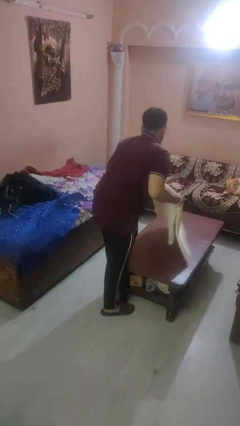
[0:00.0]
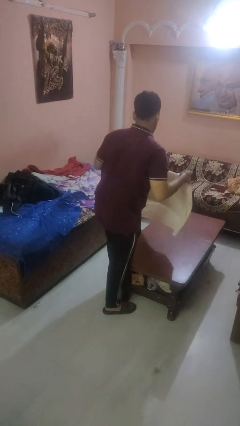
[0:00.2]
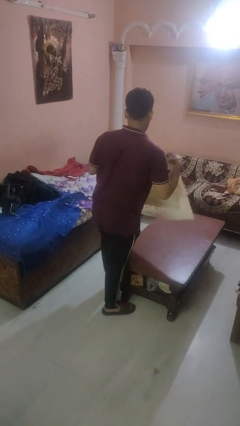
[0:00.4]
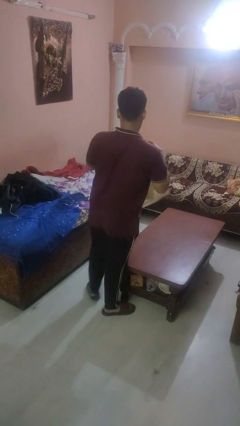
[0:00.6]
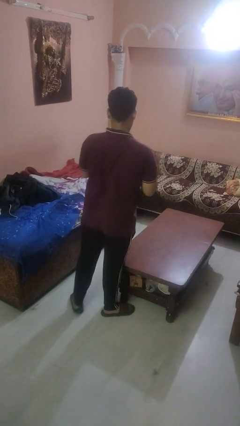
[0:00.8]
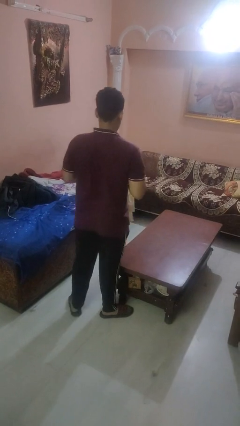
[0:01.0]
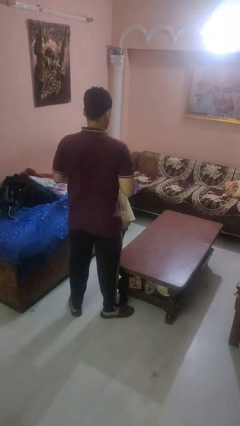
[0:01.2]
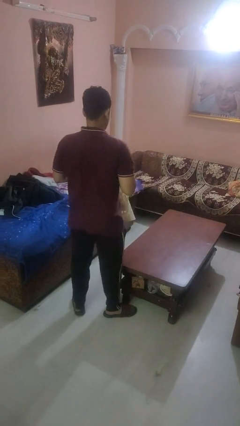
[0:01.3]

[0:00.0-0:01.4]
person folds tablecloth

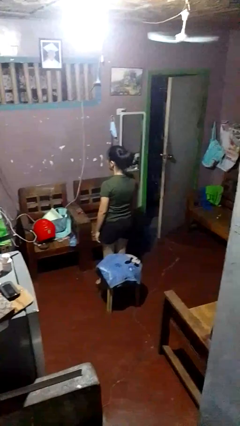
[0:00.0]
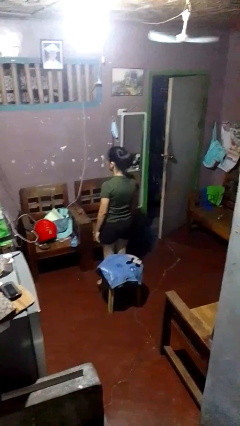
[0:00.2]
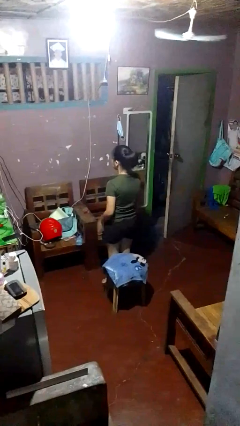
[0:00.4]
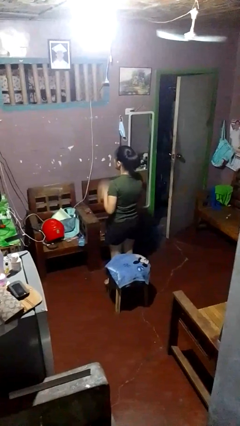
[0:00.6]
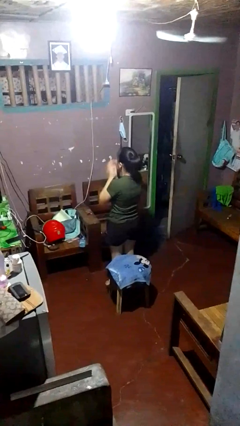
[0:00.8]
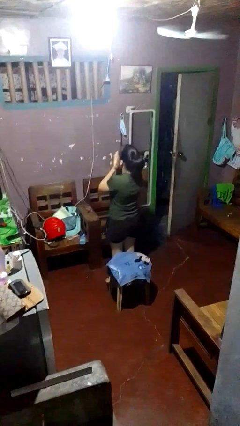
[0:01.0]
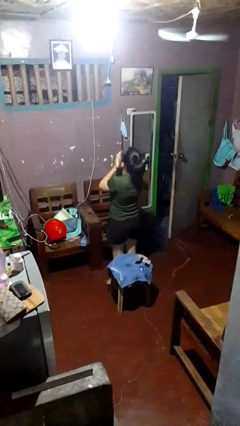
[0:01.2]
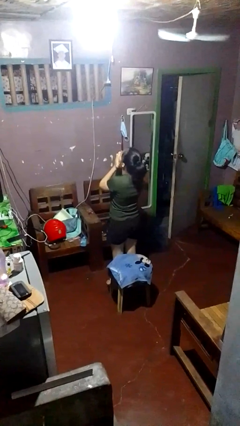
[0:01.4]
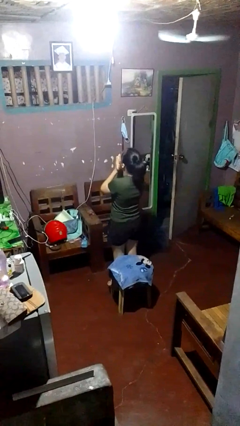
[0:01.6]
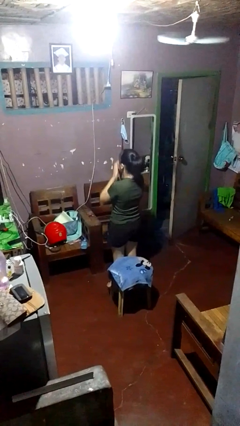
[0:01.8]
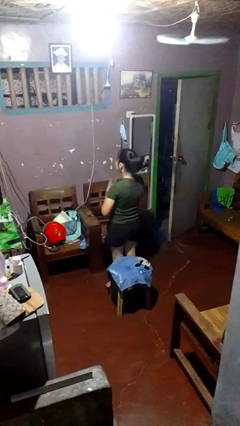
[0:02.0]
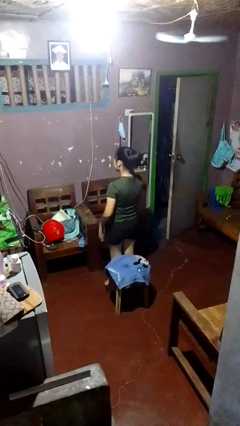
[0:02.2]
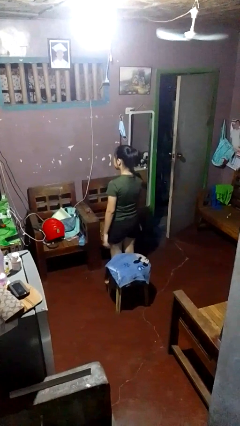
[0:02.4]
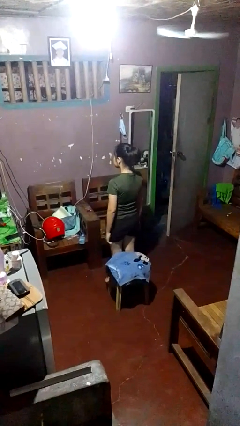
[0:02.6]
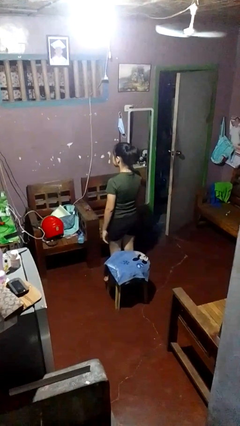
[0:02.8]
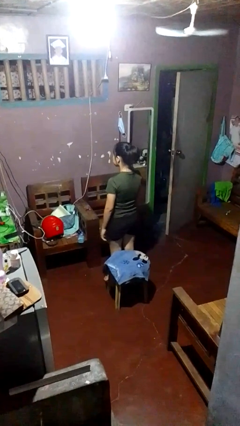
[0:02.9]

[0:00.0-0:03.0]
person yawns

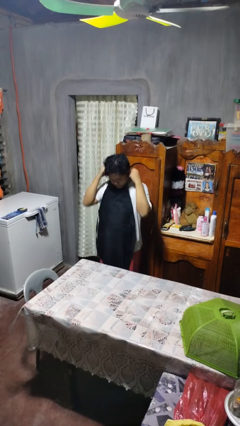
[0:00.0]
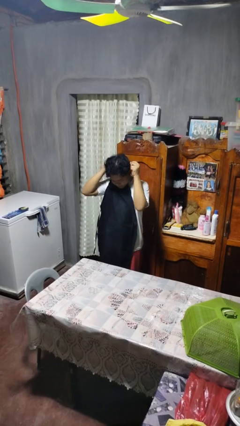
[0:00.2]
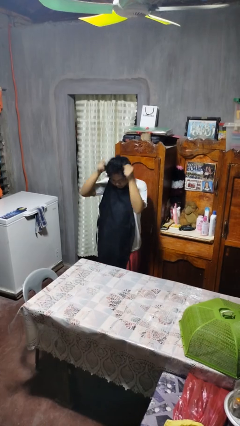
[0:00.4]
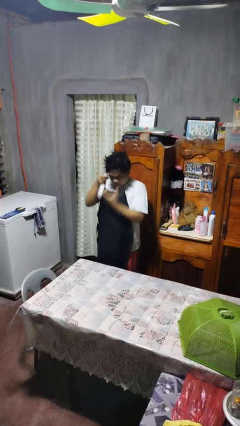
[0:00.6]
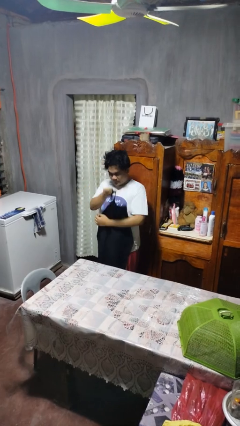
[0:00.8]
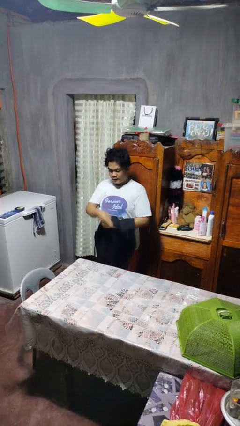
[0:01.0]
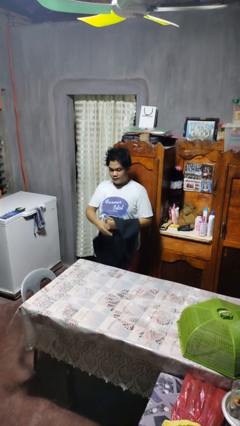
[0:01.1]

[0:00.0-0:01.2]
person takes off apron

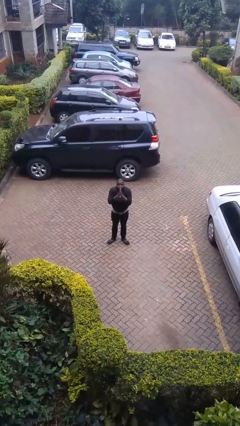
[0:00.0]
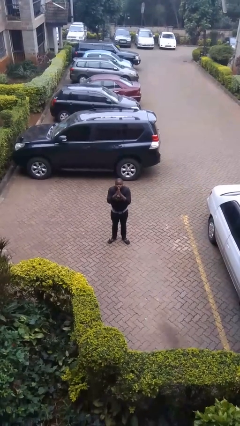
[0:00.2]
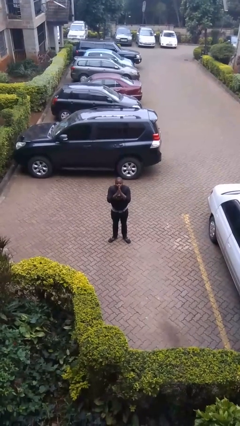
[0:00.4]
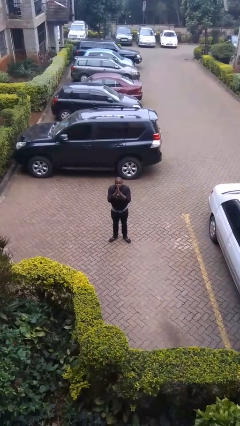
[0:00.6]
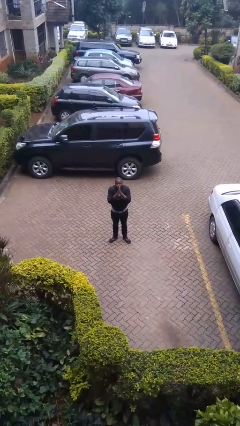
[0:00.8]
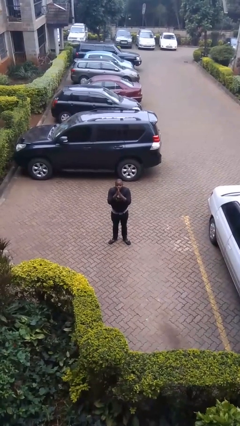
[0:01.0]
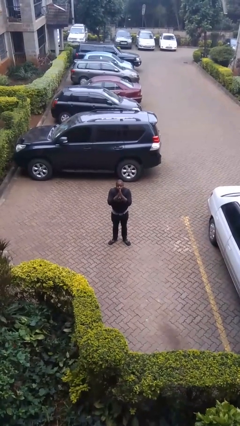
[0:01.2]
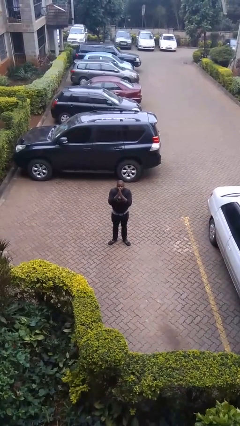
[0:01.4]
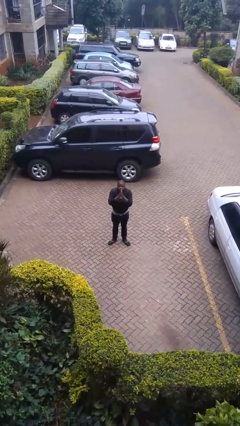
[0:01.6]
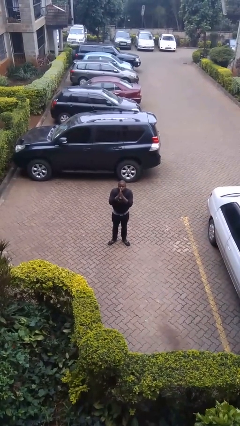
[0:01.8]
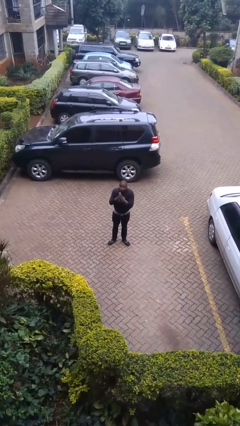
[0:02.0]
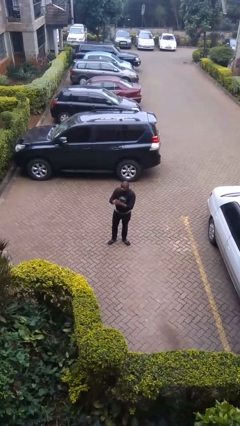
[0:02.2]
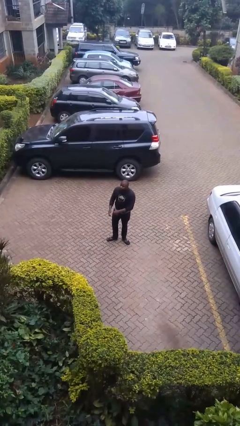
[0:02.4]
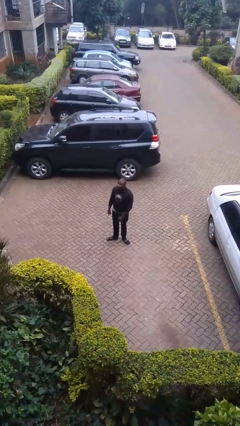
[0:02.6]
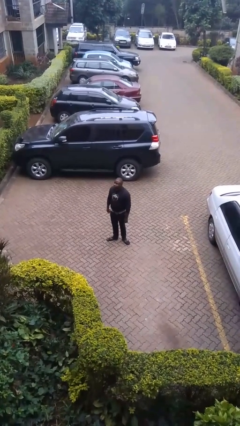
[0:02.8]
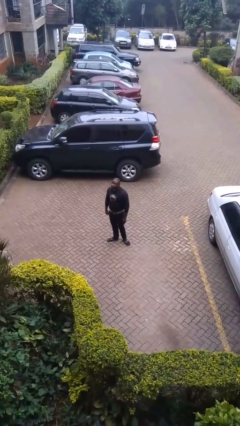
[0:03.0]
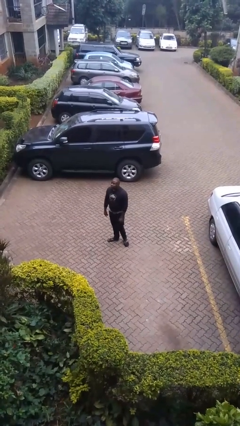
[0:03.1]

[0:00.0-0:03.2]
person blows into hands

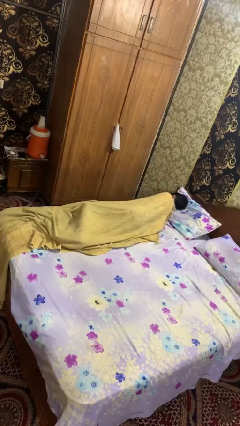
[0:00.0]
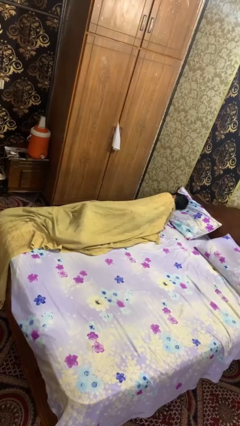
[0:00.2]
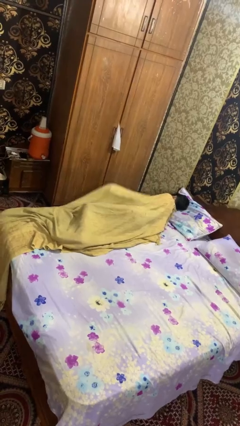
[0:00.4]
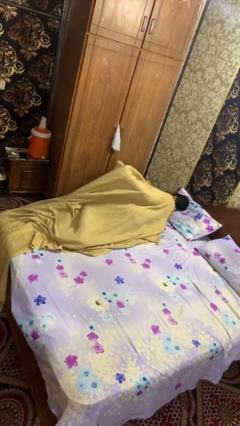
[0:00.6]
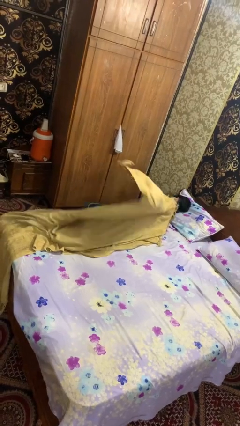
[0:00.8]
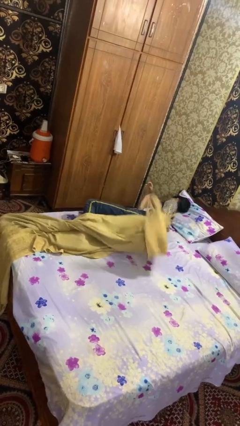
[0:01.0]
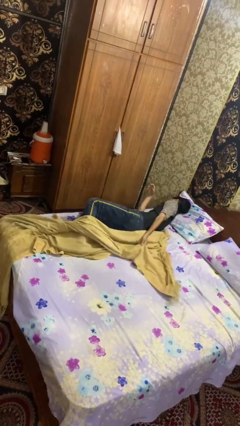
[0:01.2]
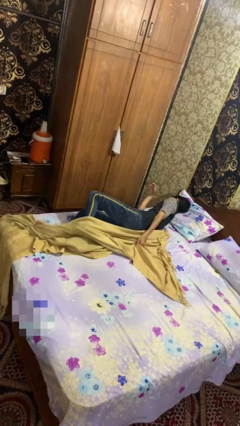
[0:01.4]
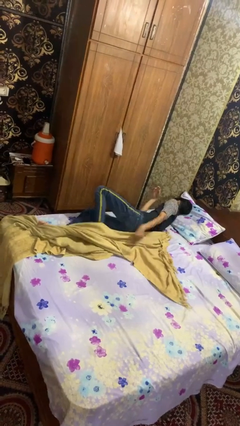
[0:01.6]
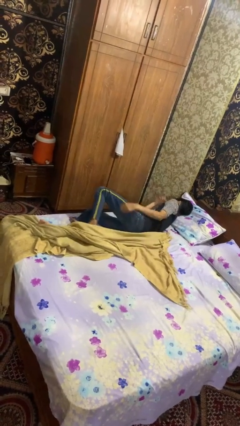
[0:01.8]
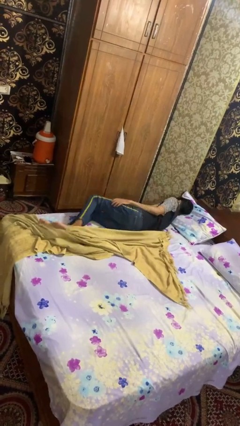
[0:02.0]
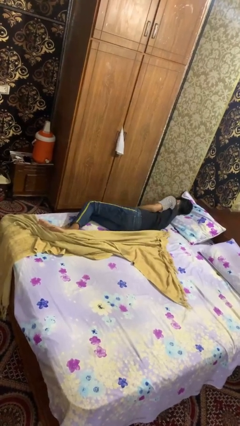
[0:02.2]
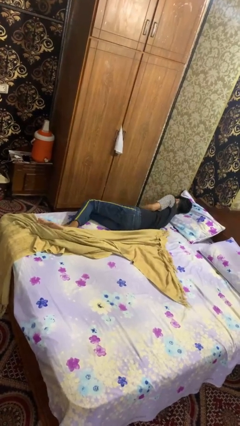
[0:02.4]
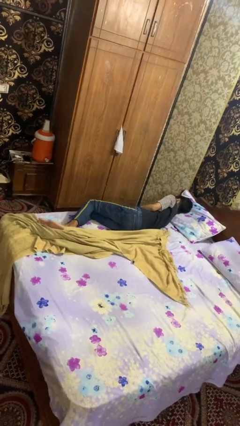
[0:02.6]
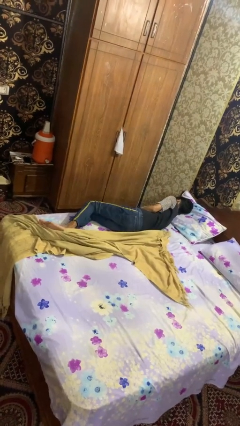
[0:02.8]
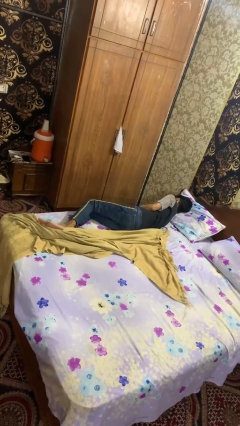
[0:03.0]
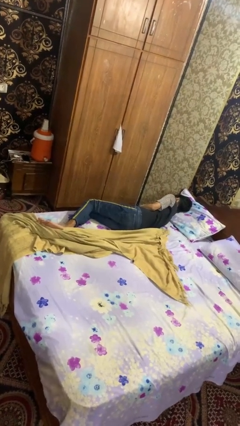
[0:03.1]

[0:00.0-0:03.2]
person uncovers with bedsheets

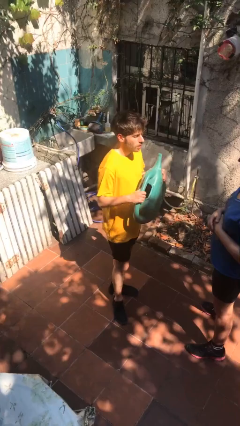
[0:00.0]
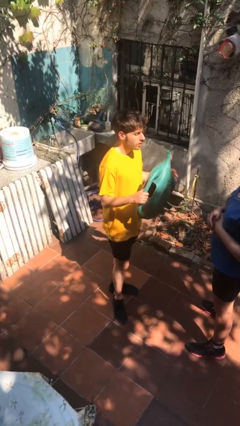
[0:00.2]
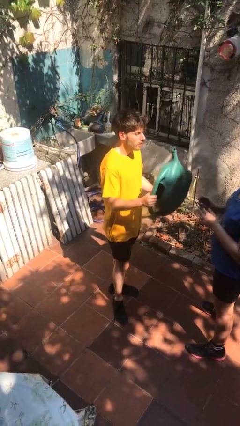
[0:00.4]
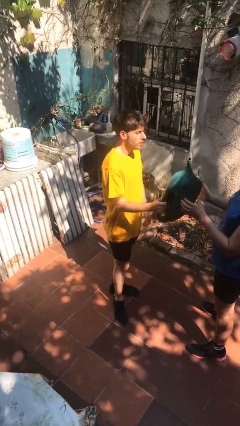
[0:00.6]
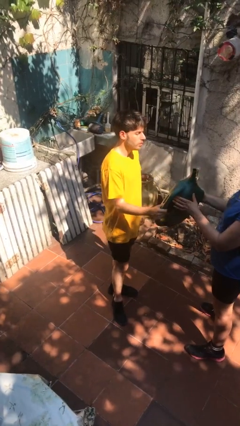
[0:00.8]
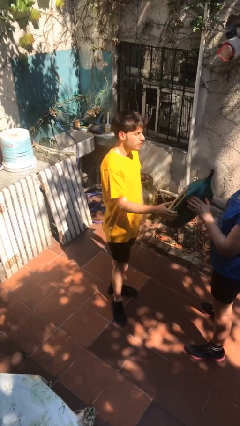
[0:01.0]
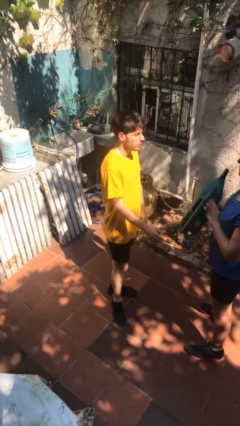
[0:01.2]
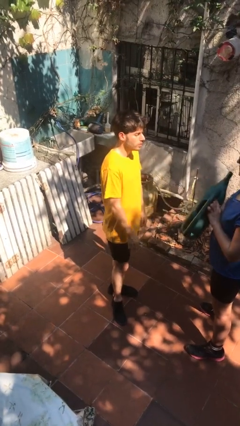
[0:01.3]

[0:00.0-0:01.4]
person transfers object to person

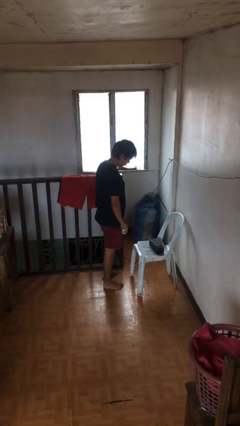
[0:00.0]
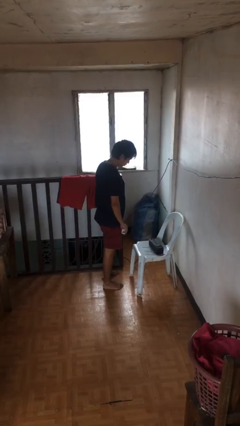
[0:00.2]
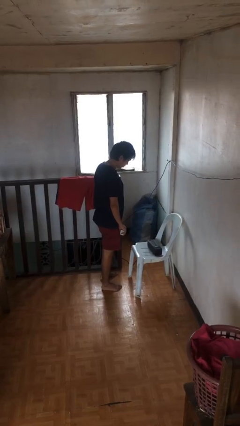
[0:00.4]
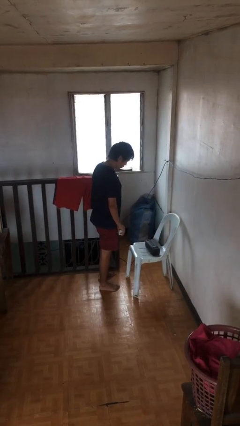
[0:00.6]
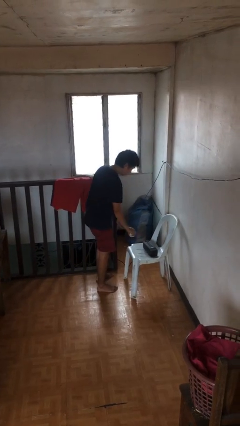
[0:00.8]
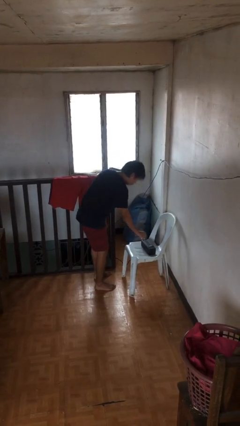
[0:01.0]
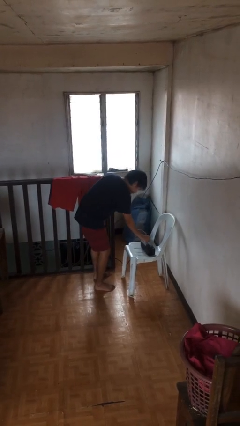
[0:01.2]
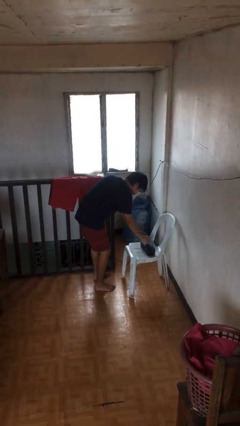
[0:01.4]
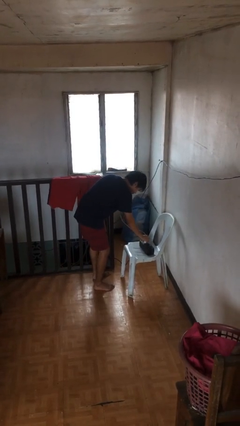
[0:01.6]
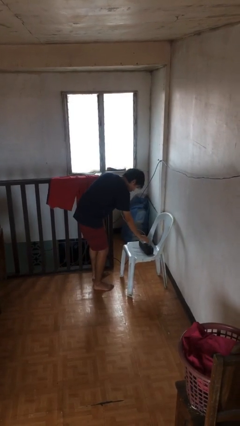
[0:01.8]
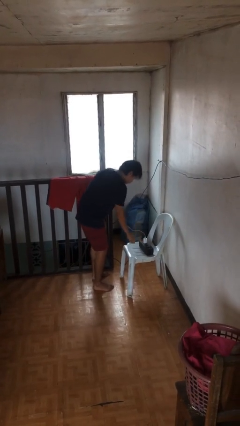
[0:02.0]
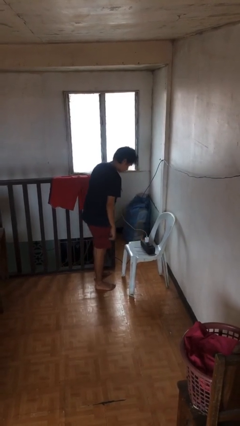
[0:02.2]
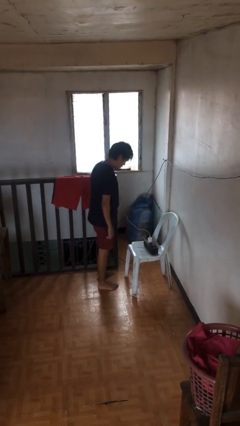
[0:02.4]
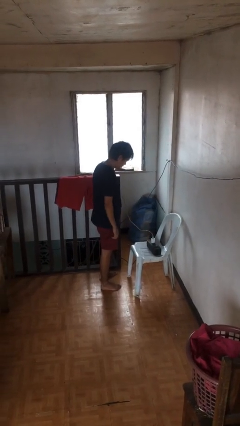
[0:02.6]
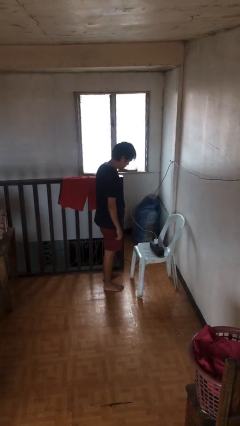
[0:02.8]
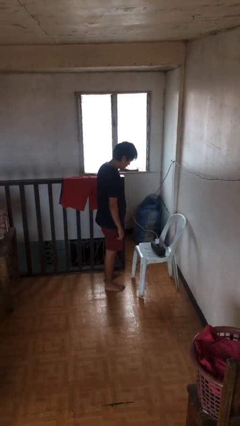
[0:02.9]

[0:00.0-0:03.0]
person plugs into electrical socket

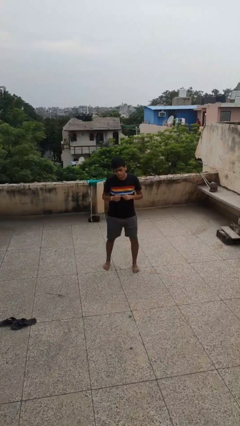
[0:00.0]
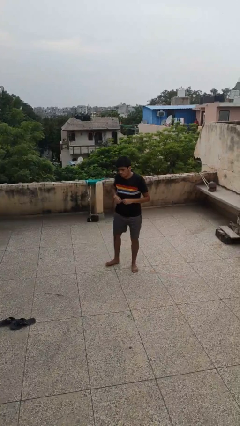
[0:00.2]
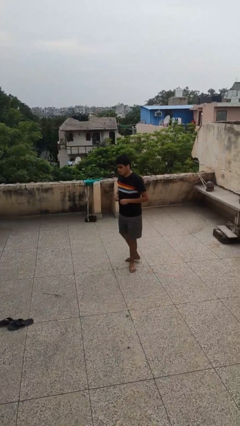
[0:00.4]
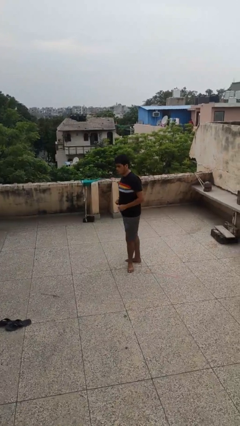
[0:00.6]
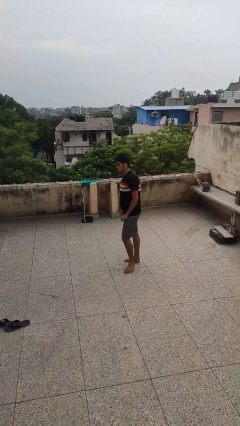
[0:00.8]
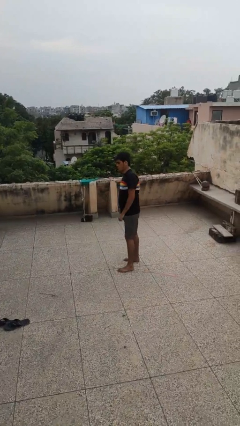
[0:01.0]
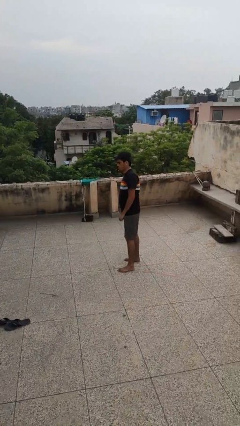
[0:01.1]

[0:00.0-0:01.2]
person punches
